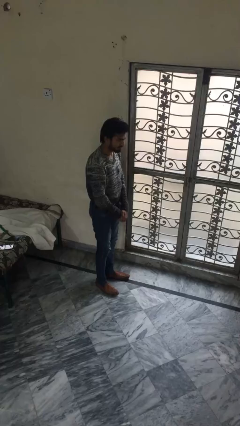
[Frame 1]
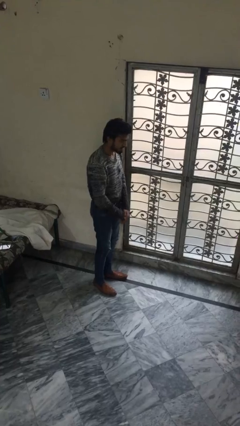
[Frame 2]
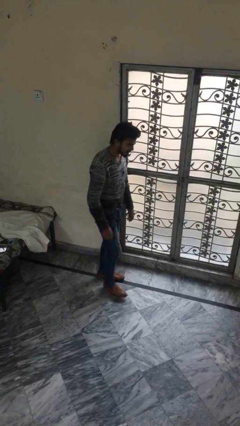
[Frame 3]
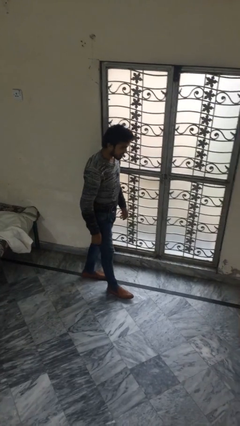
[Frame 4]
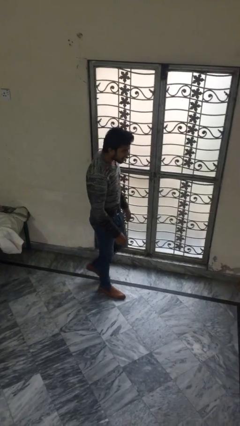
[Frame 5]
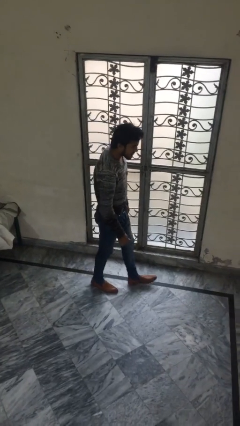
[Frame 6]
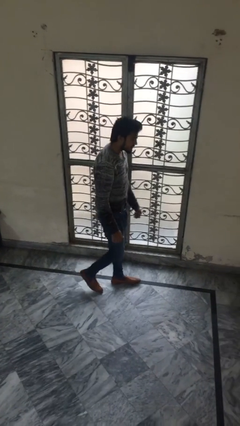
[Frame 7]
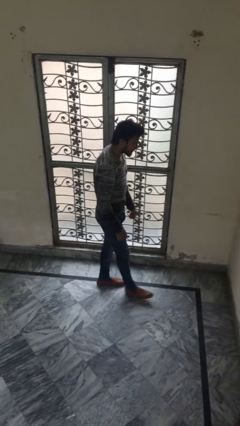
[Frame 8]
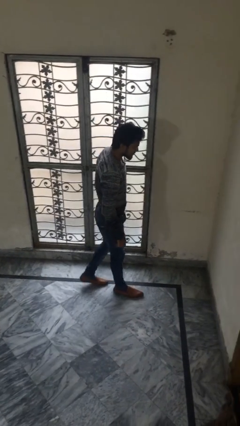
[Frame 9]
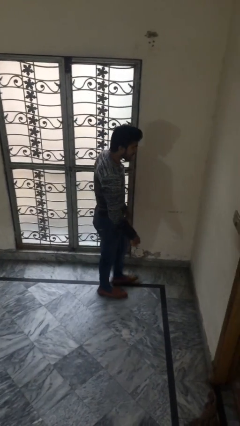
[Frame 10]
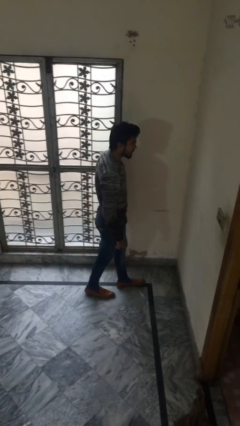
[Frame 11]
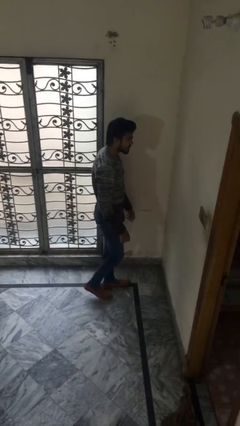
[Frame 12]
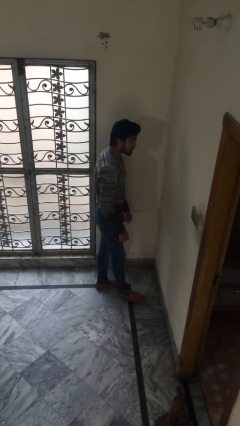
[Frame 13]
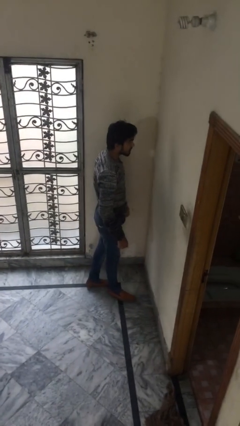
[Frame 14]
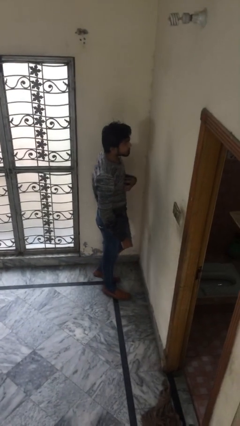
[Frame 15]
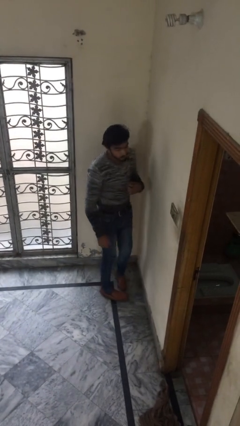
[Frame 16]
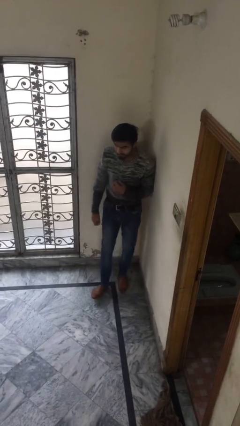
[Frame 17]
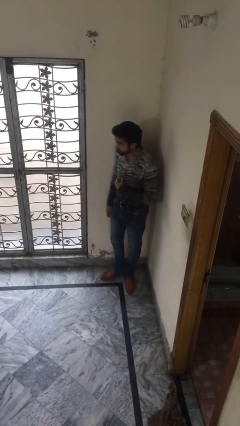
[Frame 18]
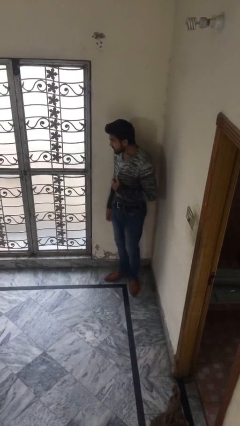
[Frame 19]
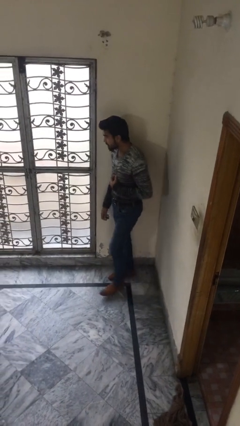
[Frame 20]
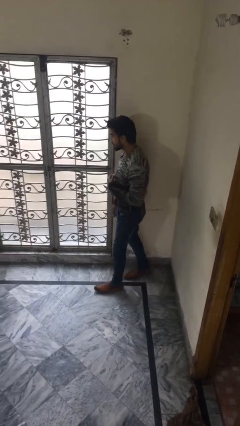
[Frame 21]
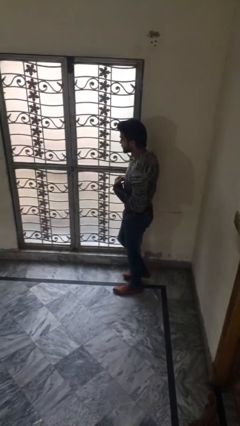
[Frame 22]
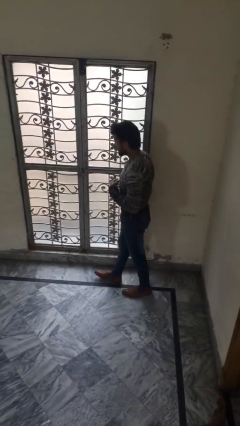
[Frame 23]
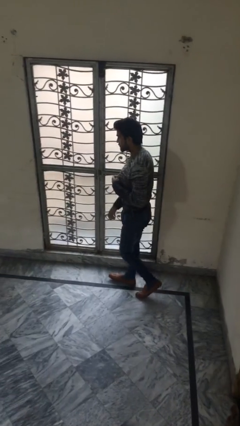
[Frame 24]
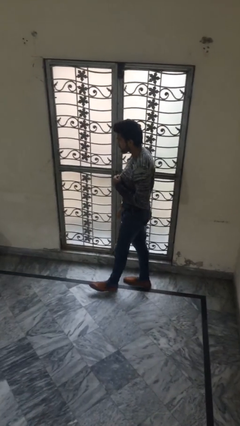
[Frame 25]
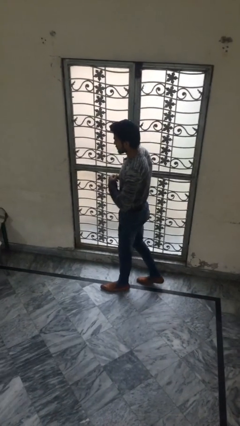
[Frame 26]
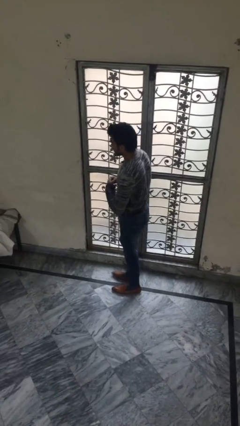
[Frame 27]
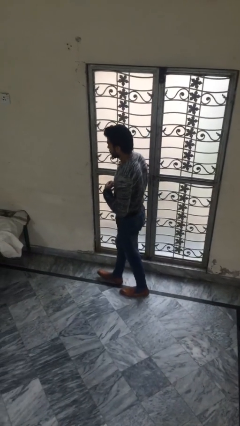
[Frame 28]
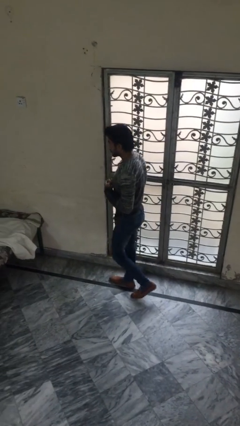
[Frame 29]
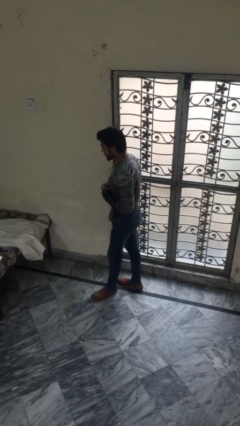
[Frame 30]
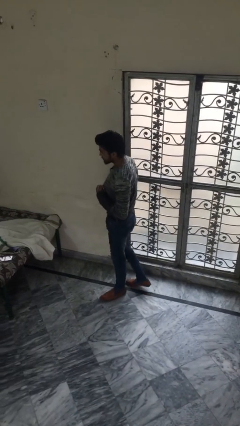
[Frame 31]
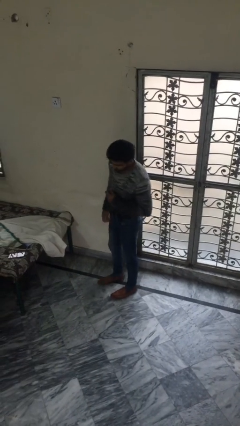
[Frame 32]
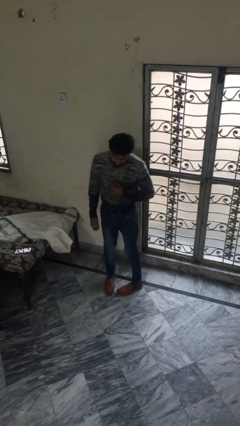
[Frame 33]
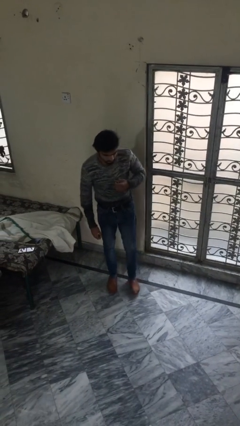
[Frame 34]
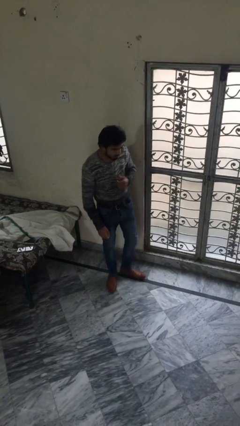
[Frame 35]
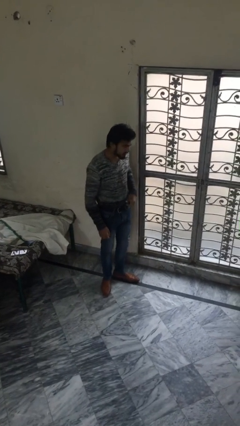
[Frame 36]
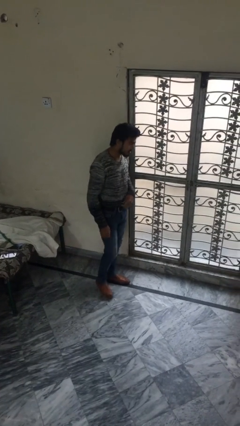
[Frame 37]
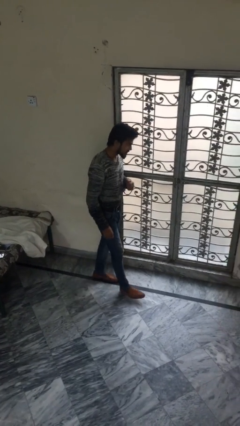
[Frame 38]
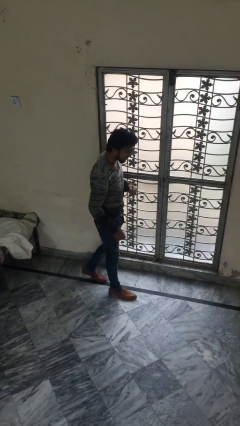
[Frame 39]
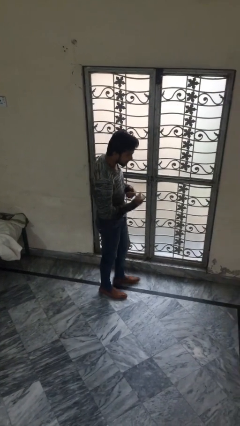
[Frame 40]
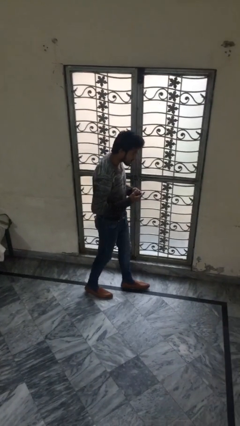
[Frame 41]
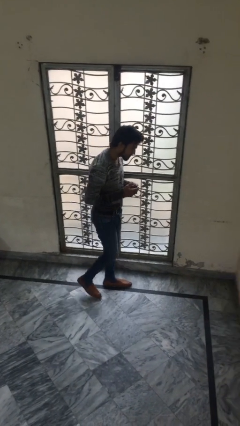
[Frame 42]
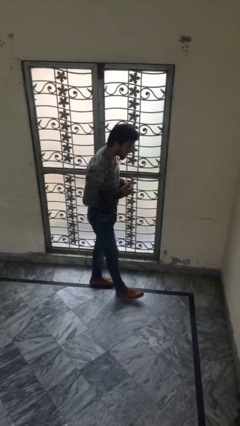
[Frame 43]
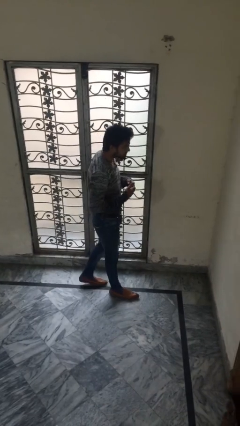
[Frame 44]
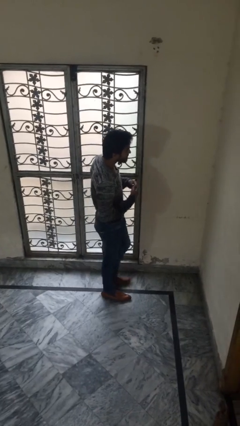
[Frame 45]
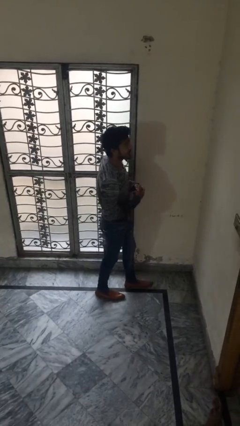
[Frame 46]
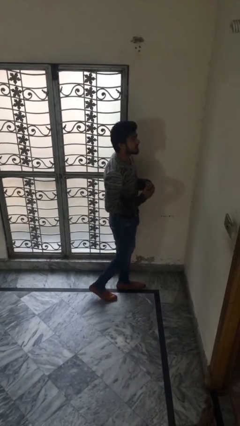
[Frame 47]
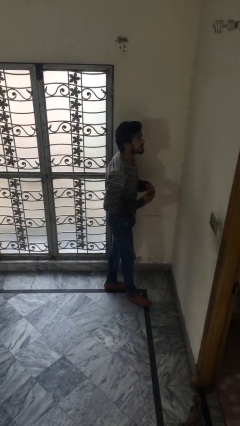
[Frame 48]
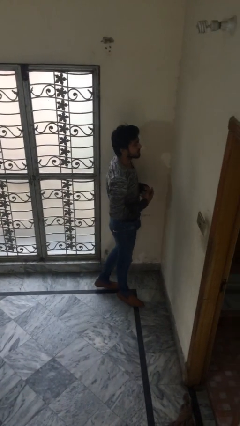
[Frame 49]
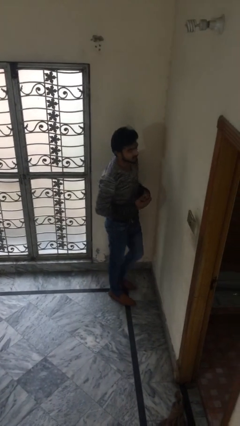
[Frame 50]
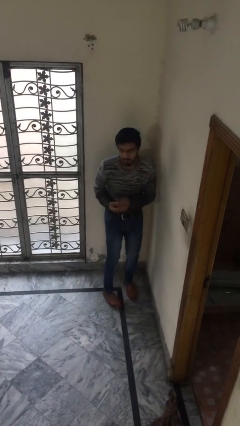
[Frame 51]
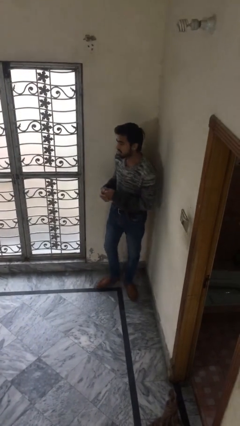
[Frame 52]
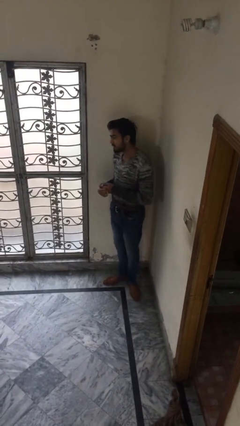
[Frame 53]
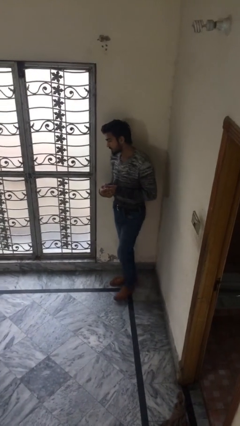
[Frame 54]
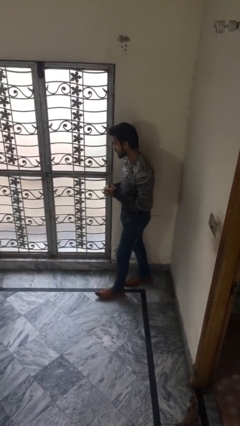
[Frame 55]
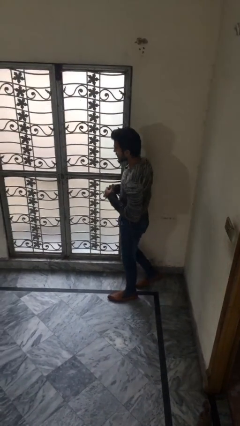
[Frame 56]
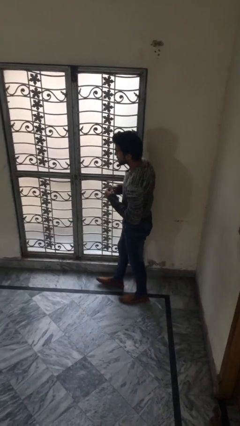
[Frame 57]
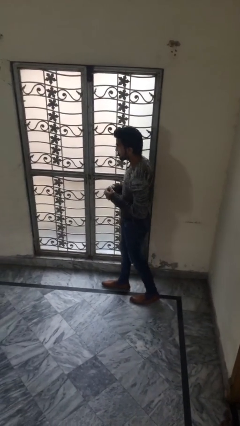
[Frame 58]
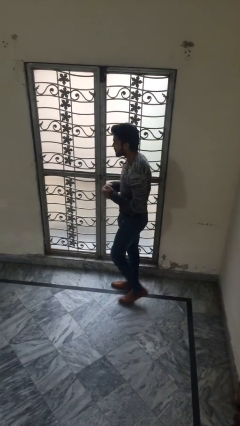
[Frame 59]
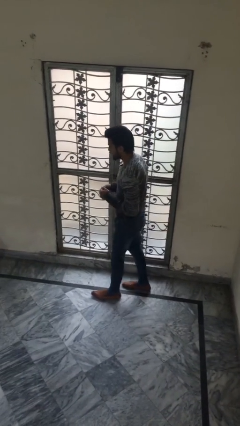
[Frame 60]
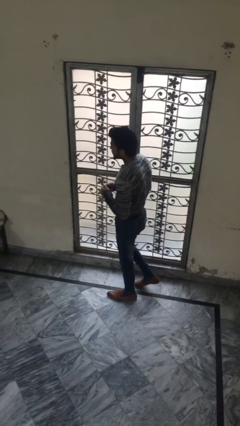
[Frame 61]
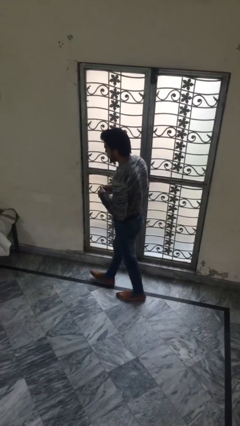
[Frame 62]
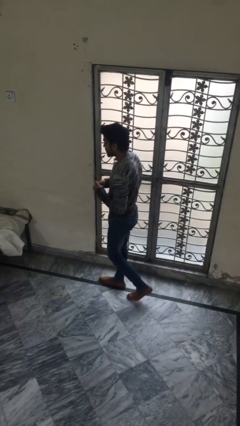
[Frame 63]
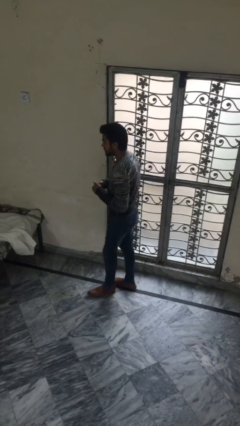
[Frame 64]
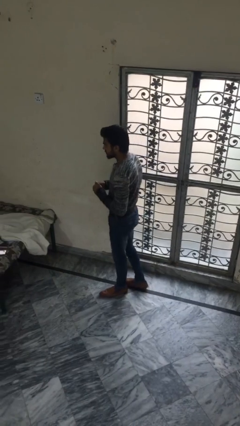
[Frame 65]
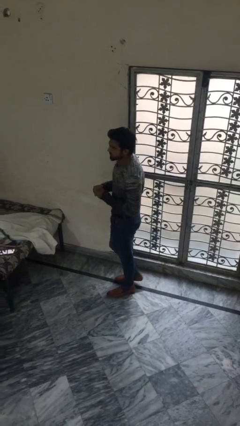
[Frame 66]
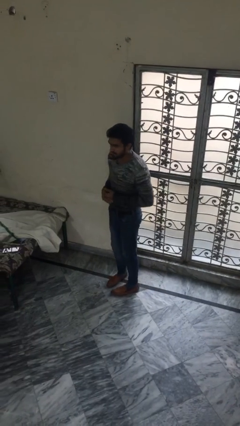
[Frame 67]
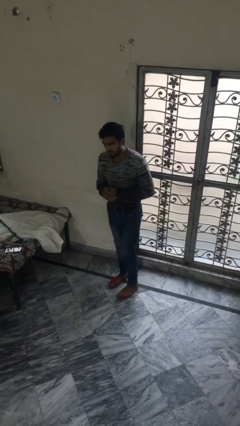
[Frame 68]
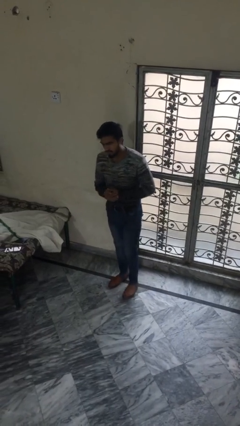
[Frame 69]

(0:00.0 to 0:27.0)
person walks

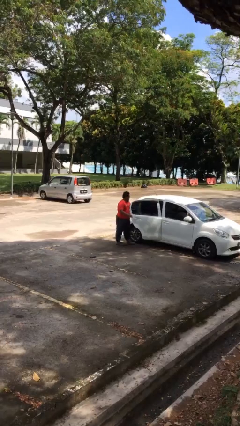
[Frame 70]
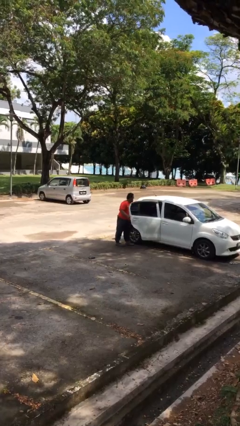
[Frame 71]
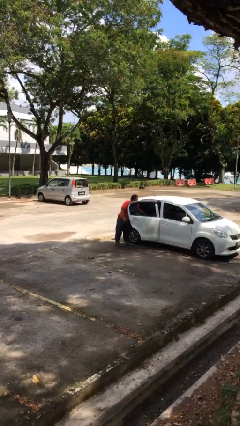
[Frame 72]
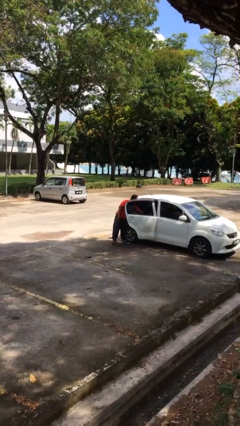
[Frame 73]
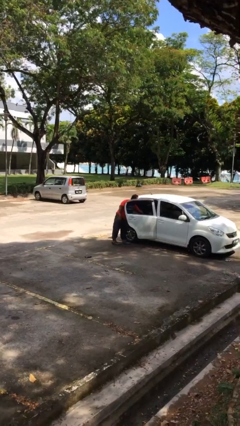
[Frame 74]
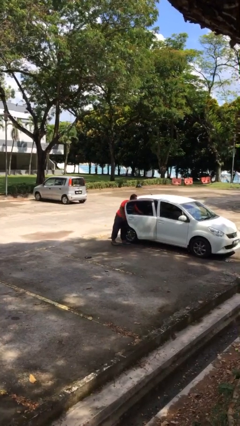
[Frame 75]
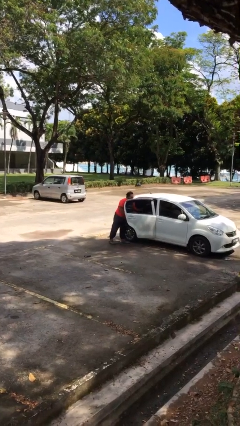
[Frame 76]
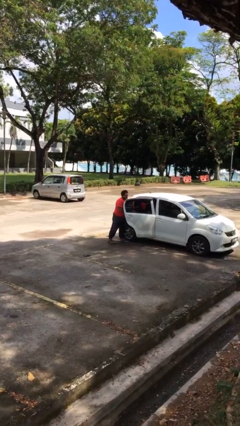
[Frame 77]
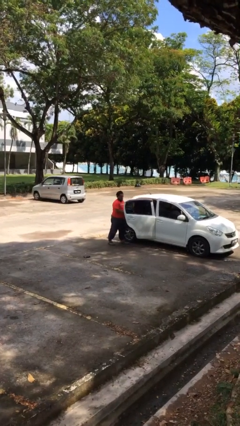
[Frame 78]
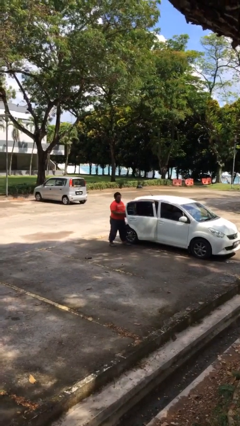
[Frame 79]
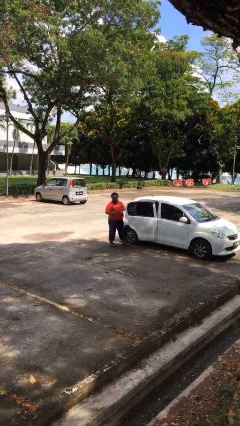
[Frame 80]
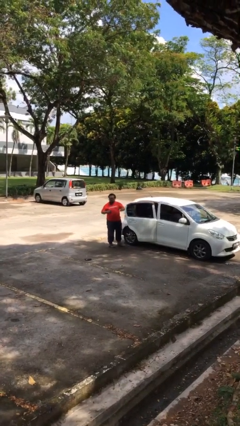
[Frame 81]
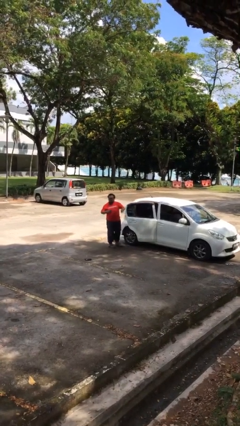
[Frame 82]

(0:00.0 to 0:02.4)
person unloads car

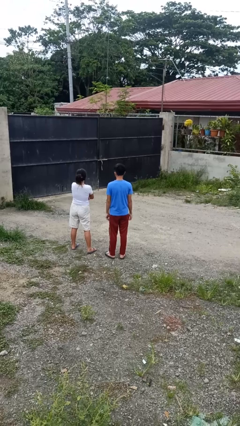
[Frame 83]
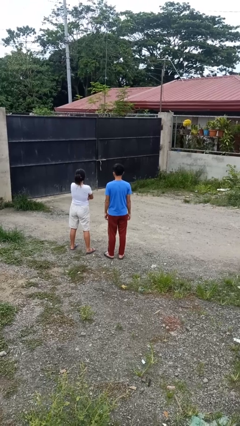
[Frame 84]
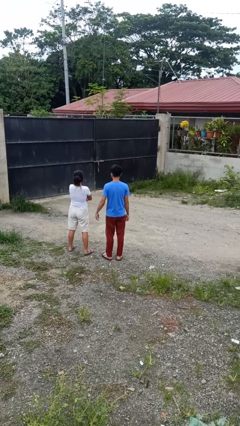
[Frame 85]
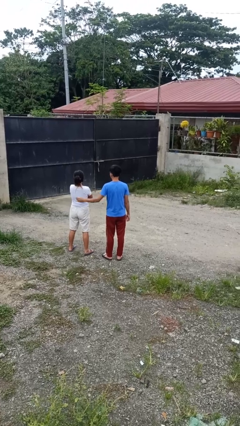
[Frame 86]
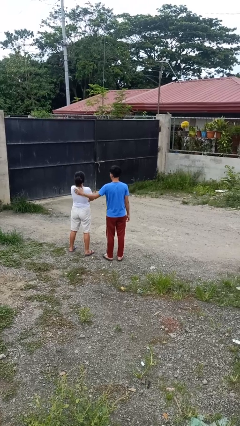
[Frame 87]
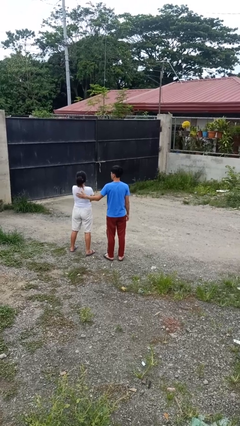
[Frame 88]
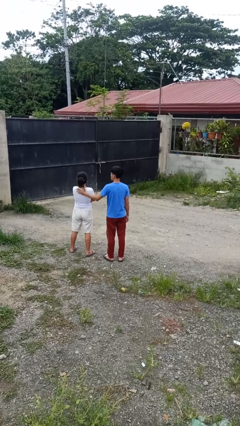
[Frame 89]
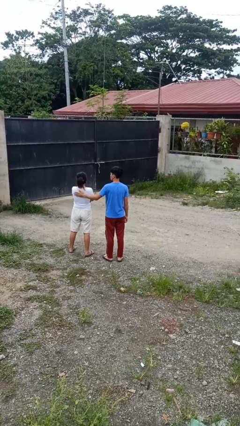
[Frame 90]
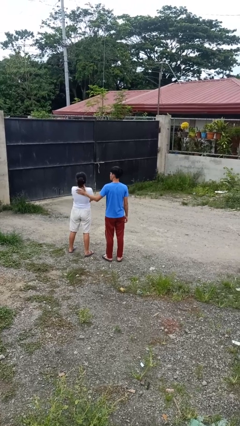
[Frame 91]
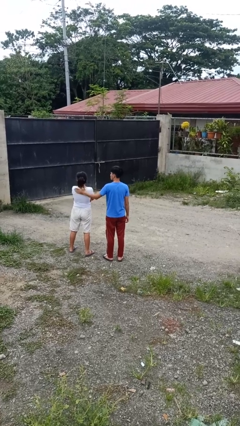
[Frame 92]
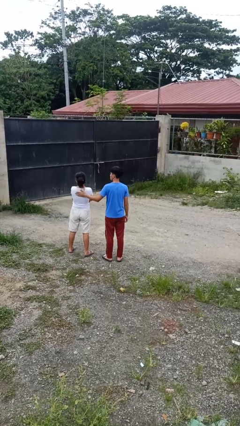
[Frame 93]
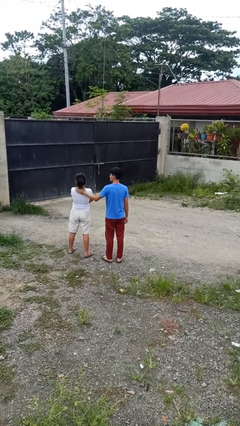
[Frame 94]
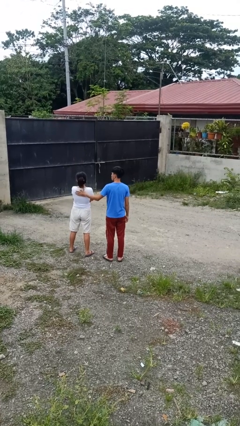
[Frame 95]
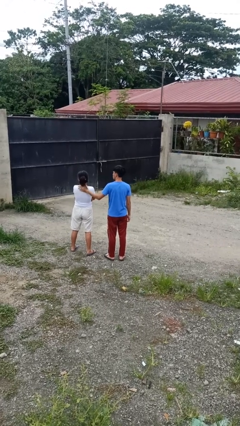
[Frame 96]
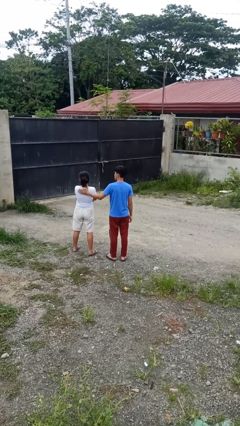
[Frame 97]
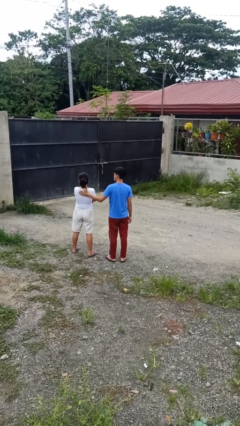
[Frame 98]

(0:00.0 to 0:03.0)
person touches back of person
